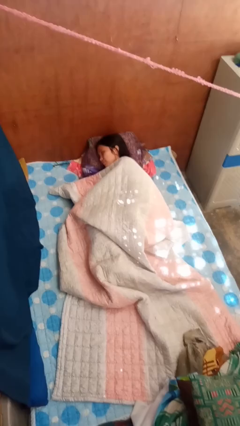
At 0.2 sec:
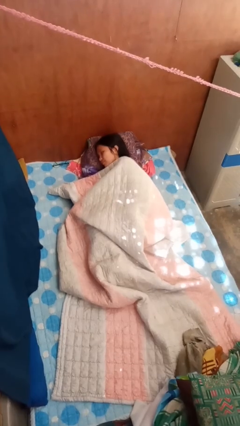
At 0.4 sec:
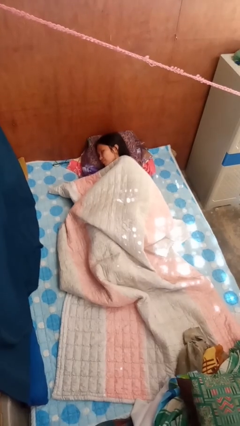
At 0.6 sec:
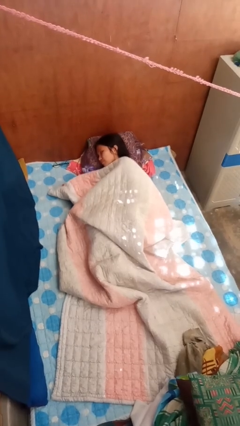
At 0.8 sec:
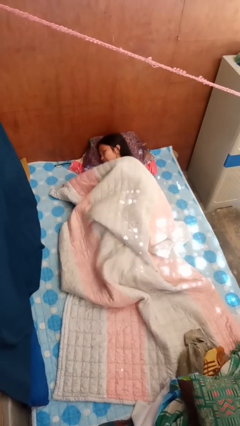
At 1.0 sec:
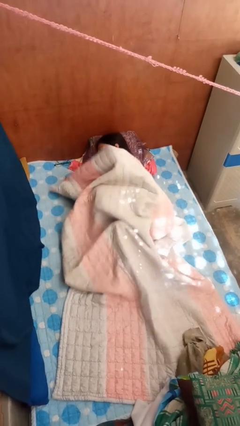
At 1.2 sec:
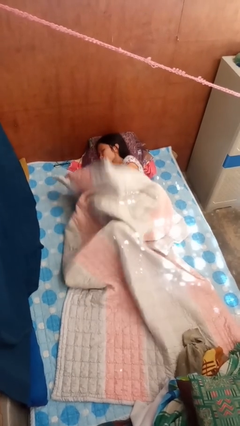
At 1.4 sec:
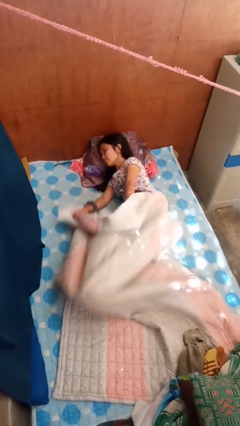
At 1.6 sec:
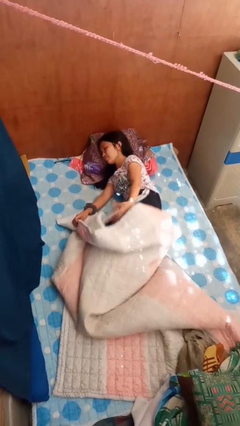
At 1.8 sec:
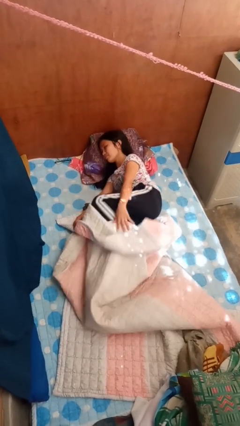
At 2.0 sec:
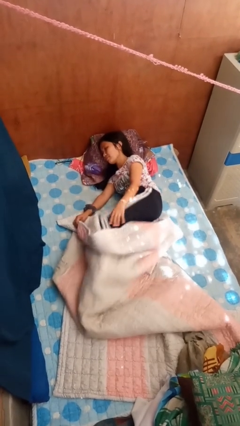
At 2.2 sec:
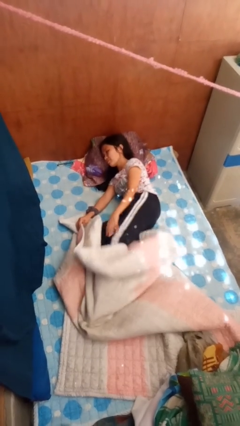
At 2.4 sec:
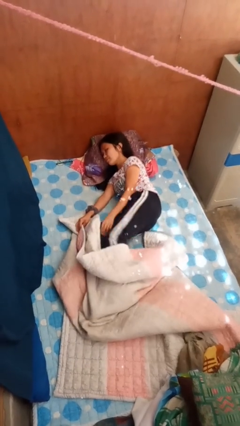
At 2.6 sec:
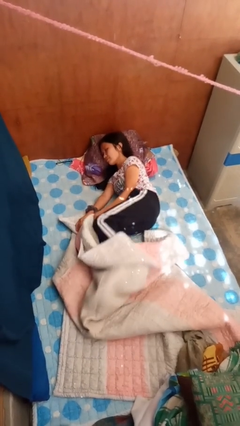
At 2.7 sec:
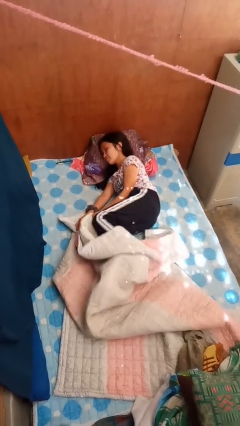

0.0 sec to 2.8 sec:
person uncovers with bedsheets

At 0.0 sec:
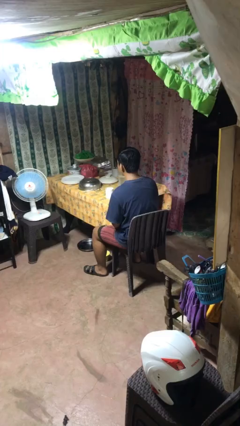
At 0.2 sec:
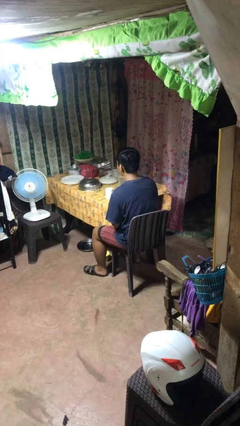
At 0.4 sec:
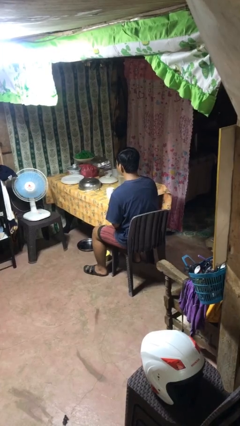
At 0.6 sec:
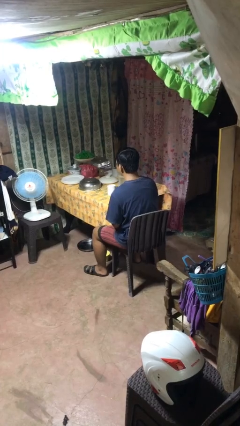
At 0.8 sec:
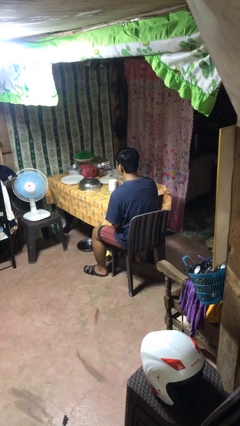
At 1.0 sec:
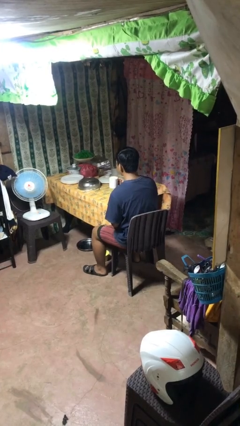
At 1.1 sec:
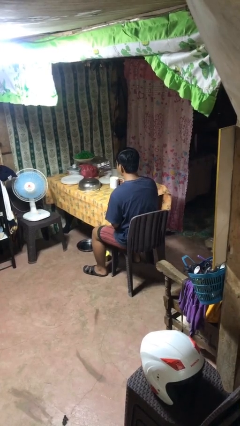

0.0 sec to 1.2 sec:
person picks up object from table

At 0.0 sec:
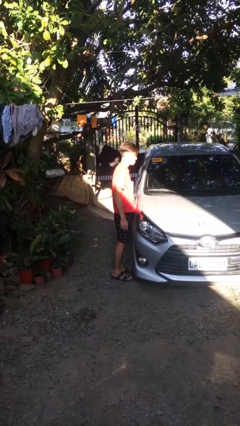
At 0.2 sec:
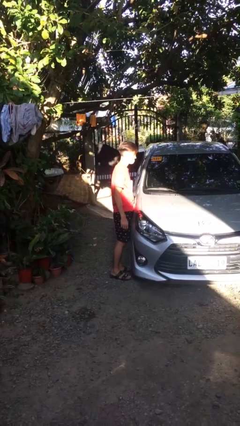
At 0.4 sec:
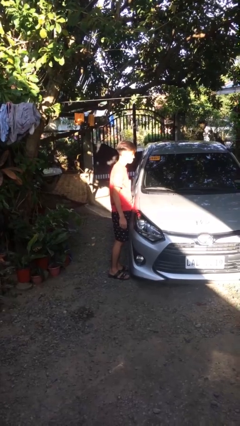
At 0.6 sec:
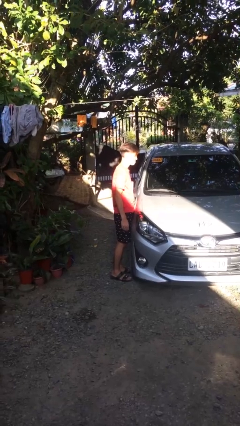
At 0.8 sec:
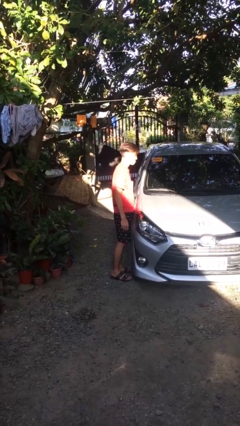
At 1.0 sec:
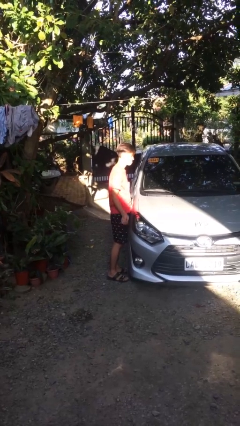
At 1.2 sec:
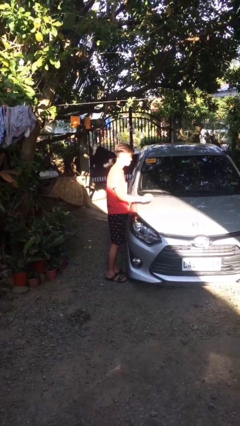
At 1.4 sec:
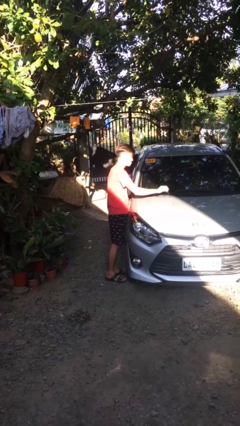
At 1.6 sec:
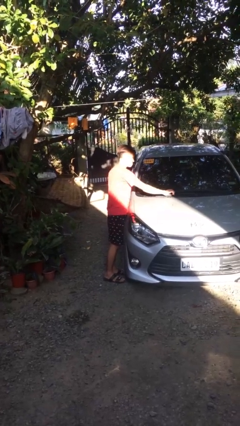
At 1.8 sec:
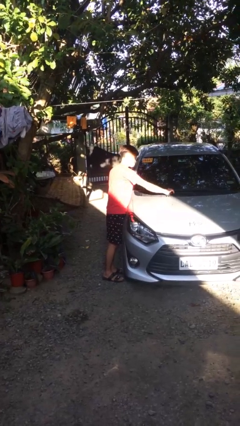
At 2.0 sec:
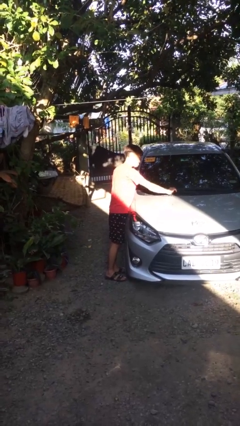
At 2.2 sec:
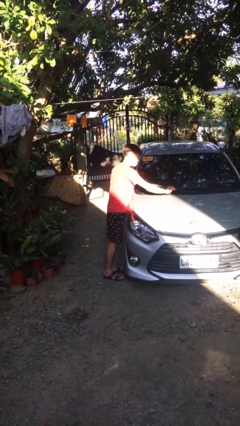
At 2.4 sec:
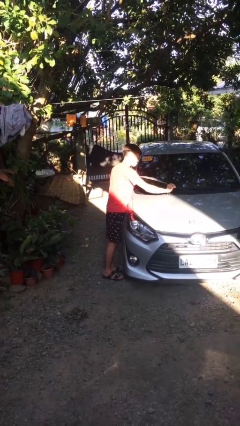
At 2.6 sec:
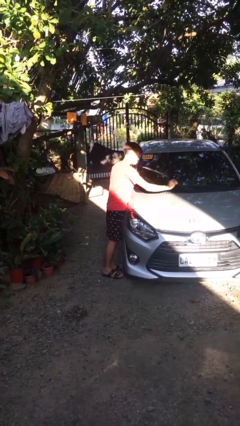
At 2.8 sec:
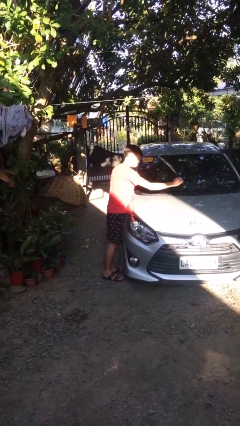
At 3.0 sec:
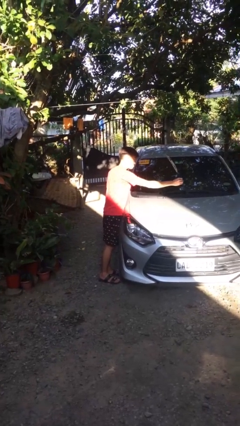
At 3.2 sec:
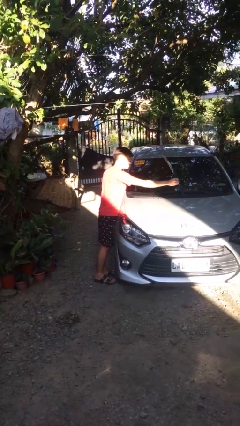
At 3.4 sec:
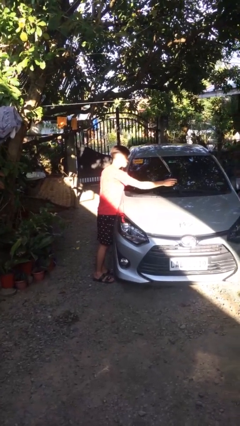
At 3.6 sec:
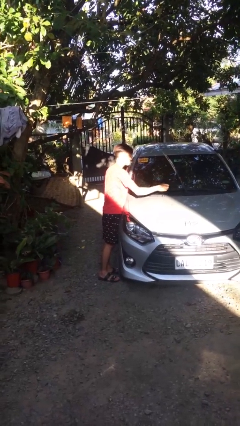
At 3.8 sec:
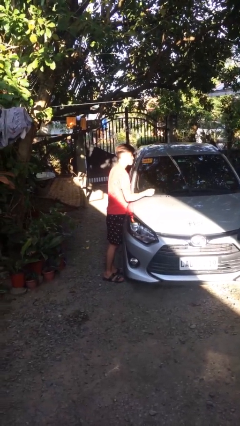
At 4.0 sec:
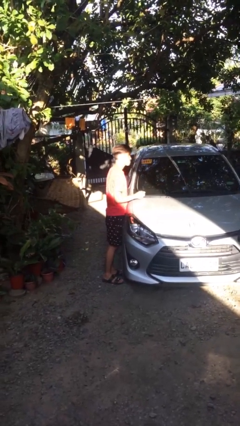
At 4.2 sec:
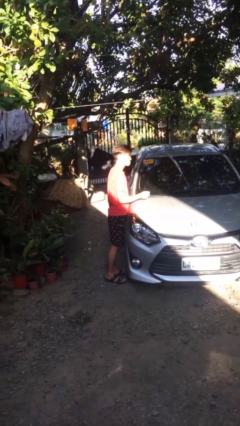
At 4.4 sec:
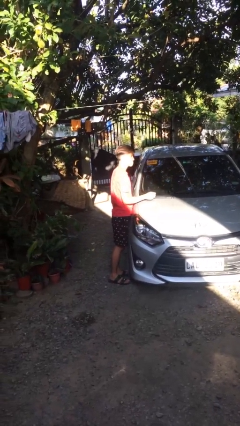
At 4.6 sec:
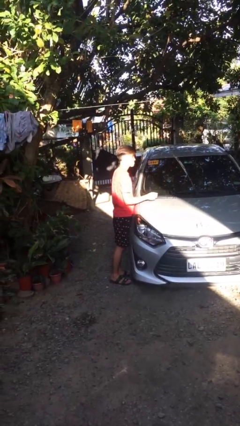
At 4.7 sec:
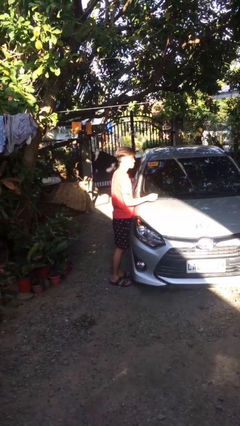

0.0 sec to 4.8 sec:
person flips up car wipers

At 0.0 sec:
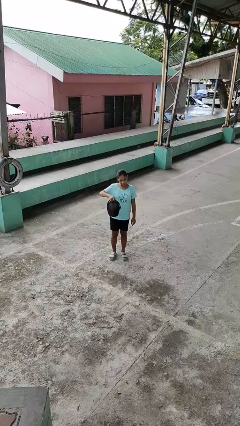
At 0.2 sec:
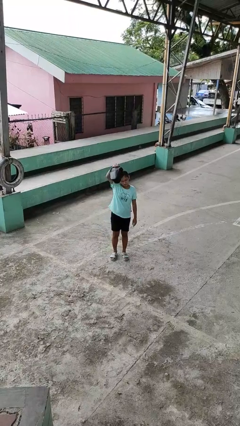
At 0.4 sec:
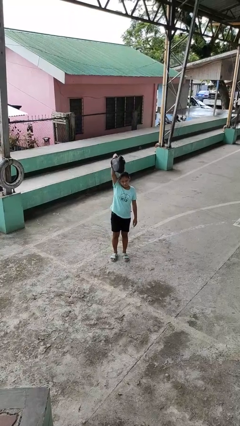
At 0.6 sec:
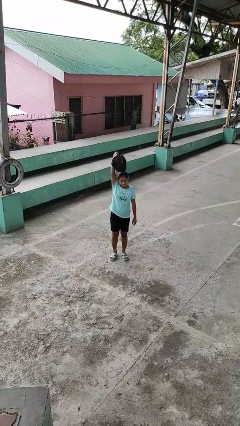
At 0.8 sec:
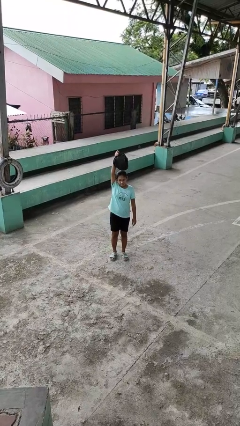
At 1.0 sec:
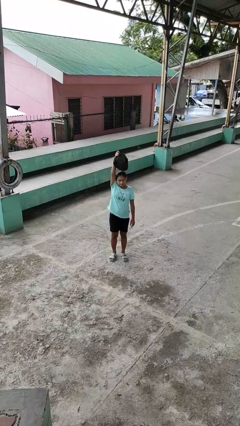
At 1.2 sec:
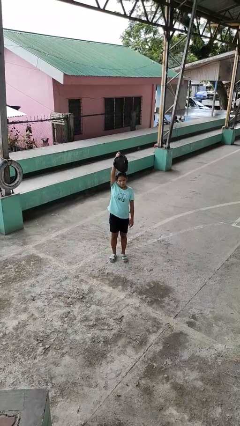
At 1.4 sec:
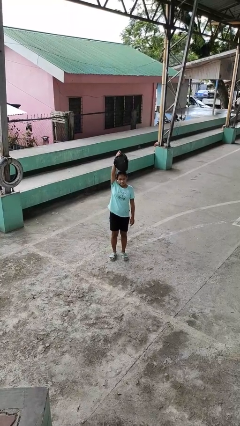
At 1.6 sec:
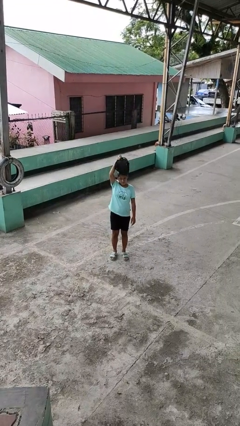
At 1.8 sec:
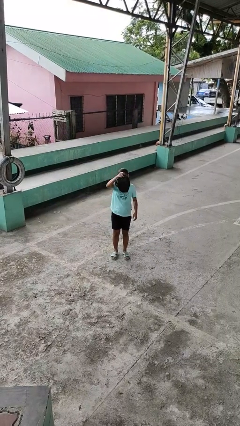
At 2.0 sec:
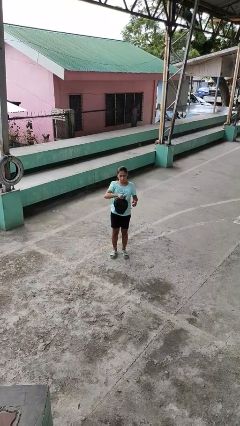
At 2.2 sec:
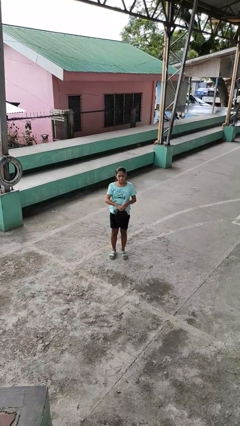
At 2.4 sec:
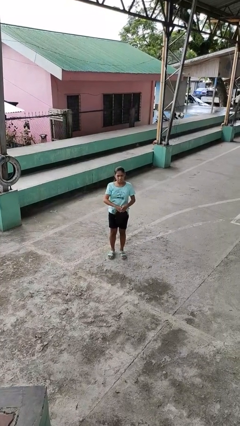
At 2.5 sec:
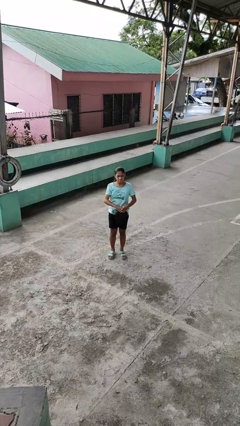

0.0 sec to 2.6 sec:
person holds object above head

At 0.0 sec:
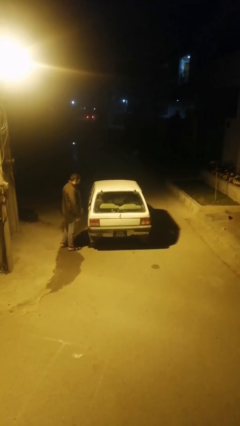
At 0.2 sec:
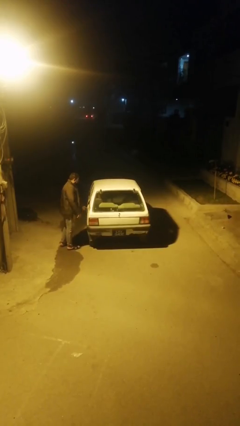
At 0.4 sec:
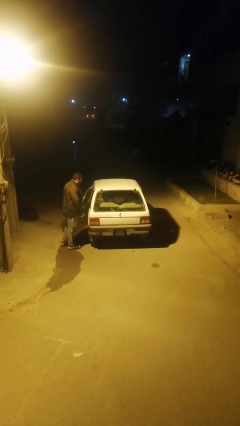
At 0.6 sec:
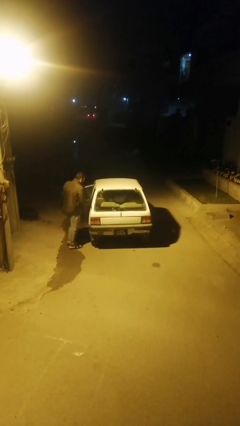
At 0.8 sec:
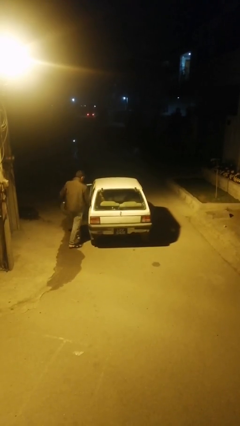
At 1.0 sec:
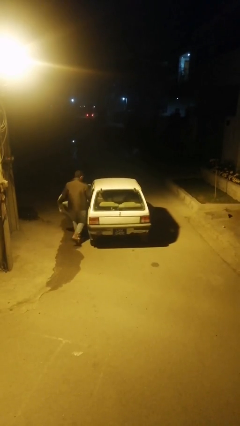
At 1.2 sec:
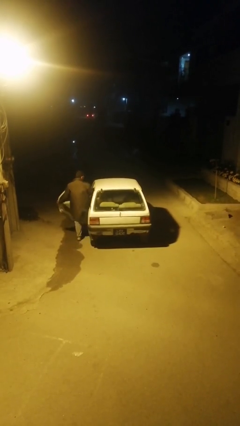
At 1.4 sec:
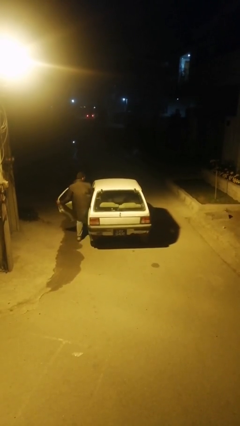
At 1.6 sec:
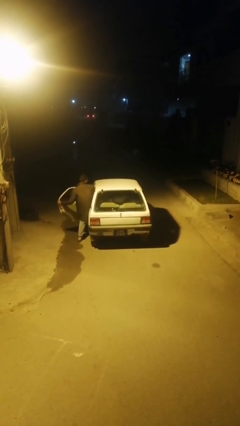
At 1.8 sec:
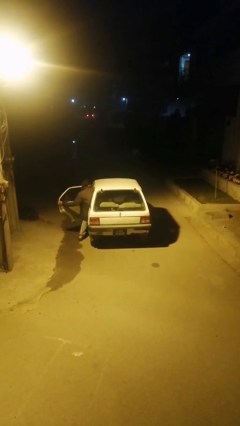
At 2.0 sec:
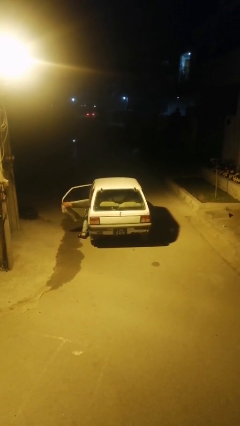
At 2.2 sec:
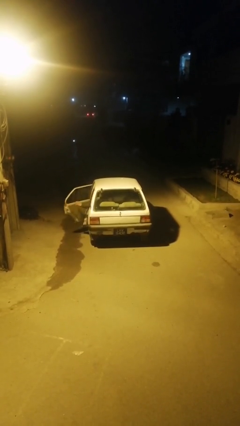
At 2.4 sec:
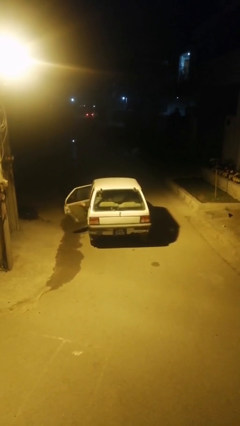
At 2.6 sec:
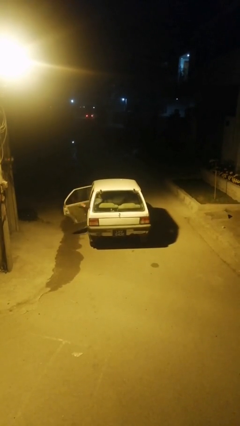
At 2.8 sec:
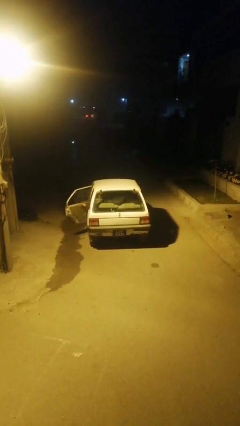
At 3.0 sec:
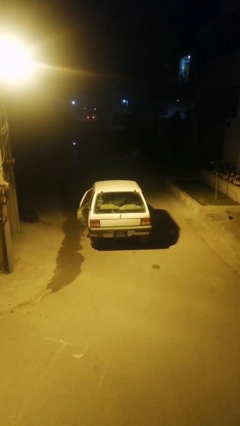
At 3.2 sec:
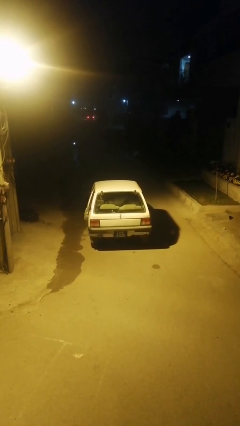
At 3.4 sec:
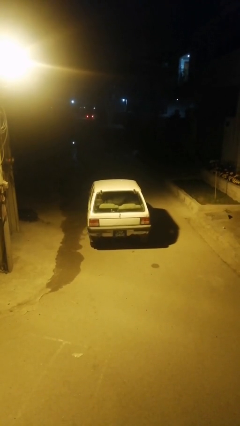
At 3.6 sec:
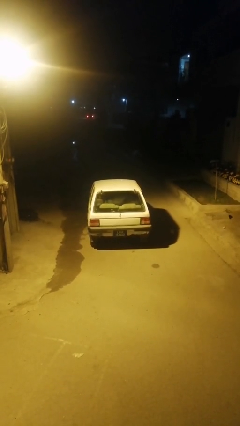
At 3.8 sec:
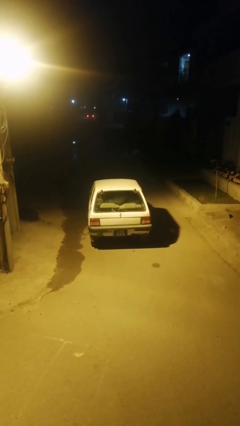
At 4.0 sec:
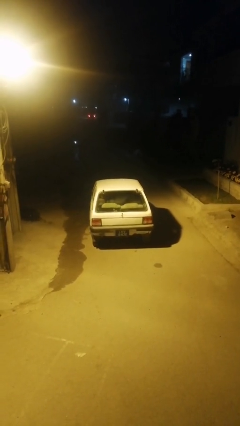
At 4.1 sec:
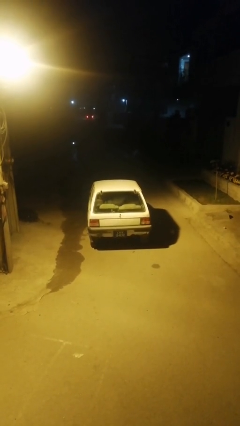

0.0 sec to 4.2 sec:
car picks up person

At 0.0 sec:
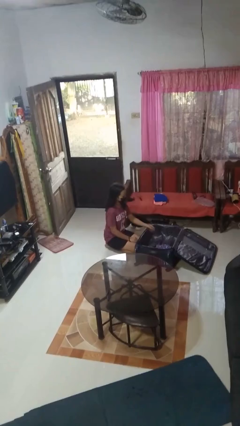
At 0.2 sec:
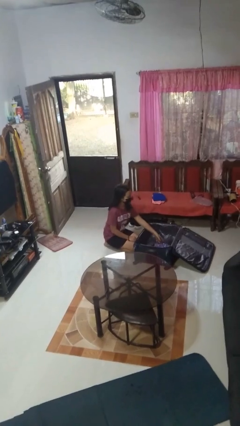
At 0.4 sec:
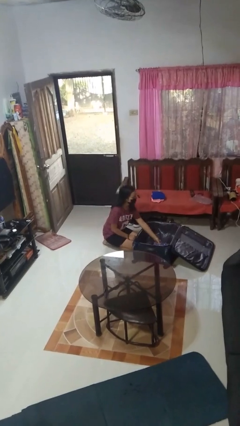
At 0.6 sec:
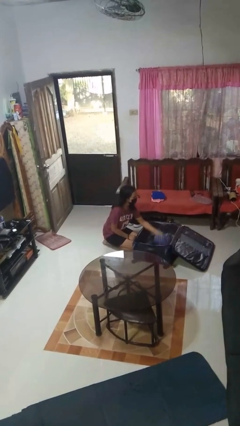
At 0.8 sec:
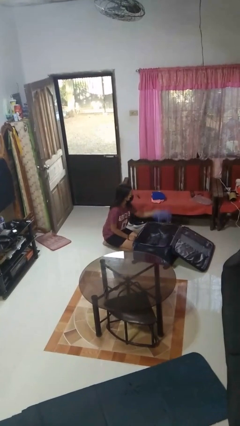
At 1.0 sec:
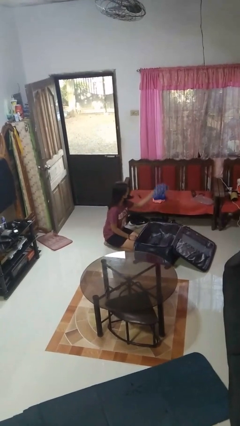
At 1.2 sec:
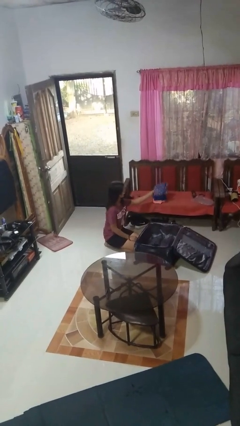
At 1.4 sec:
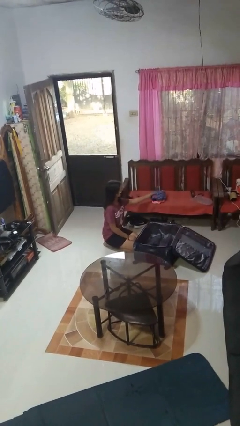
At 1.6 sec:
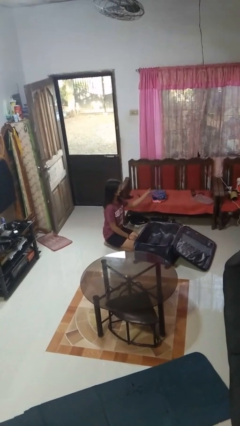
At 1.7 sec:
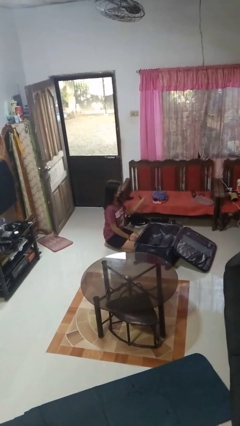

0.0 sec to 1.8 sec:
person unloads clothes from suitcase
